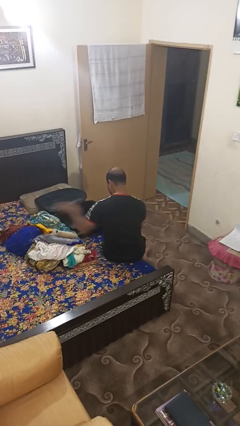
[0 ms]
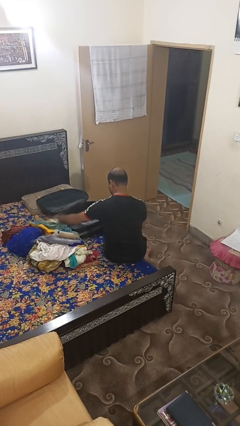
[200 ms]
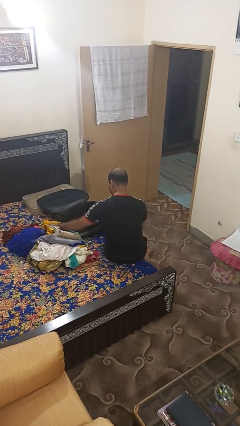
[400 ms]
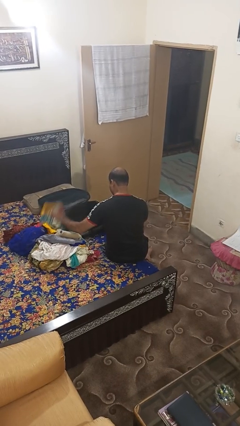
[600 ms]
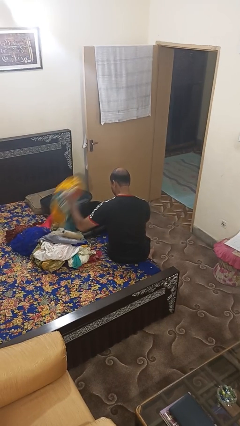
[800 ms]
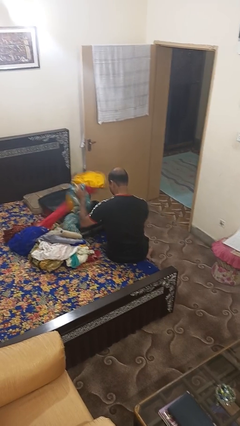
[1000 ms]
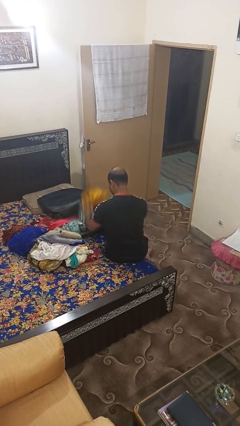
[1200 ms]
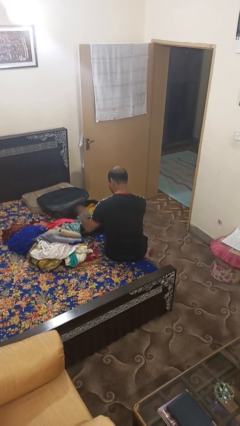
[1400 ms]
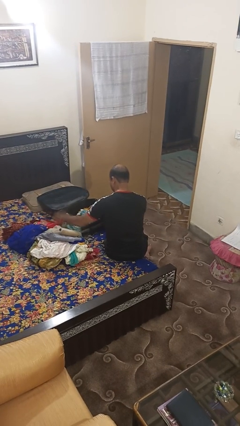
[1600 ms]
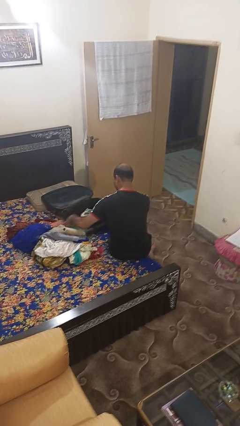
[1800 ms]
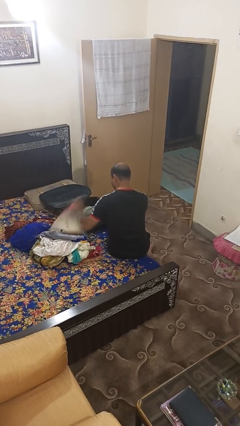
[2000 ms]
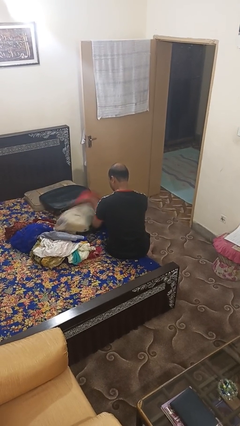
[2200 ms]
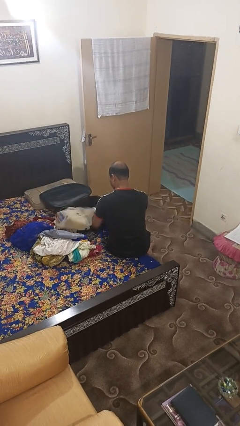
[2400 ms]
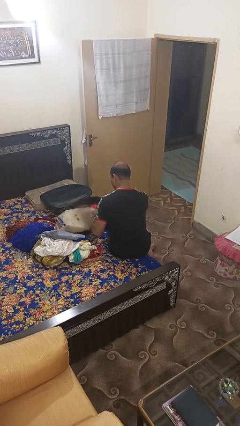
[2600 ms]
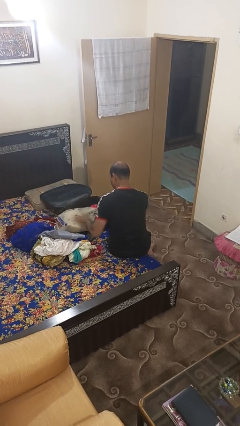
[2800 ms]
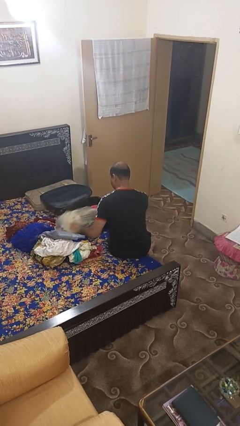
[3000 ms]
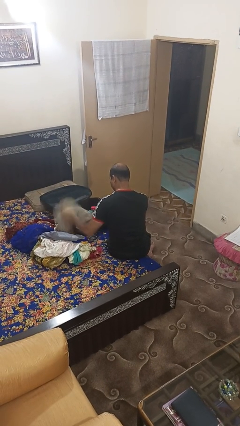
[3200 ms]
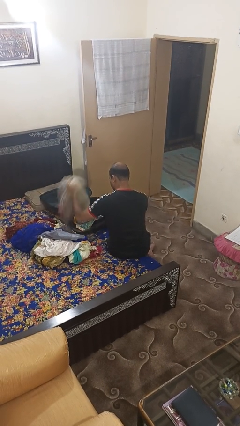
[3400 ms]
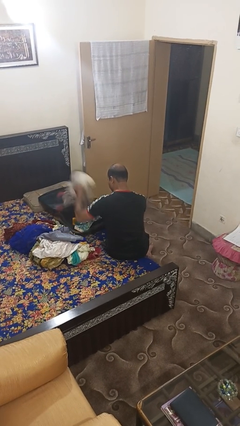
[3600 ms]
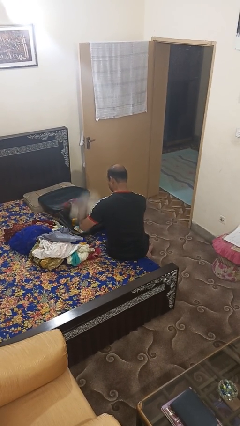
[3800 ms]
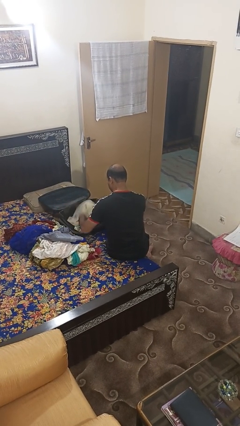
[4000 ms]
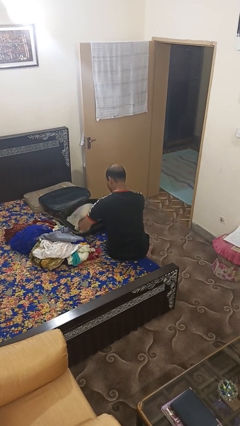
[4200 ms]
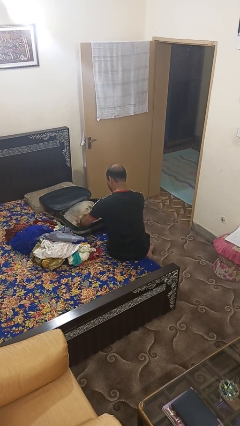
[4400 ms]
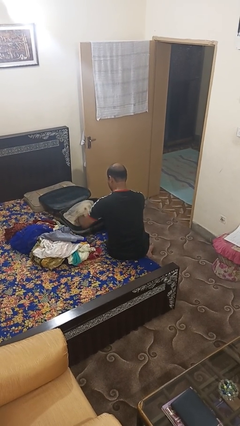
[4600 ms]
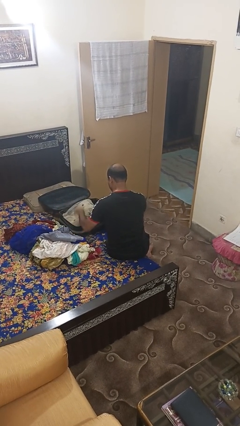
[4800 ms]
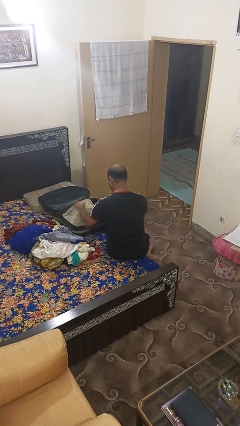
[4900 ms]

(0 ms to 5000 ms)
person loads clothes into suitcase

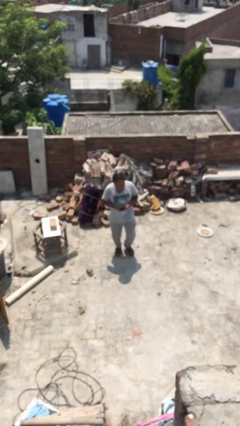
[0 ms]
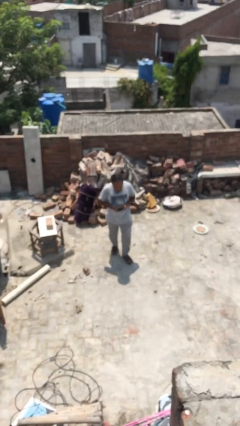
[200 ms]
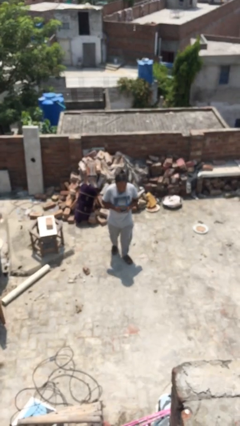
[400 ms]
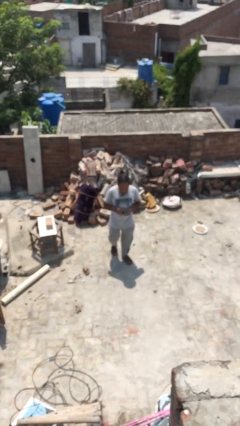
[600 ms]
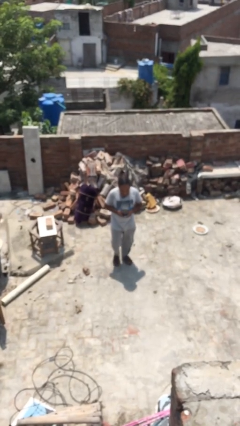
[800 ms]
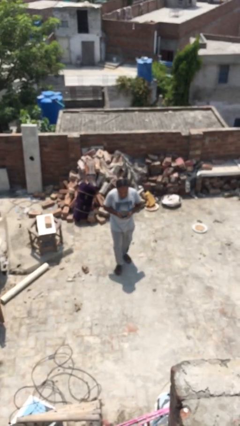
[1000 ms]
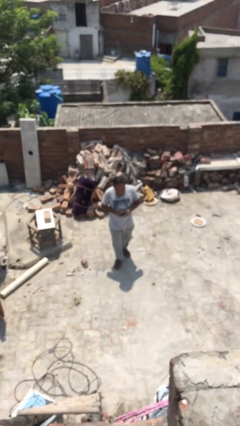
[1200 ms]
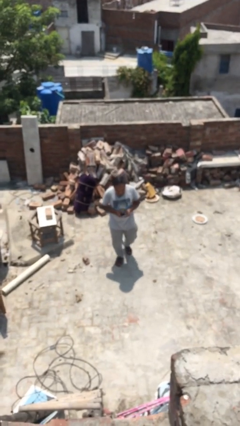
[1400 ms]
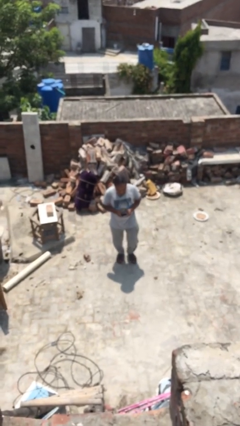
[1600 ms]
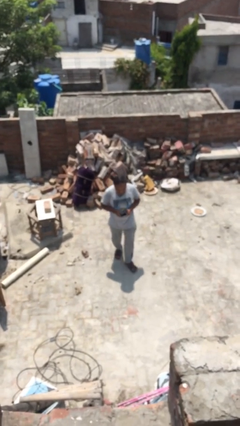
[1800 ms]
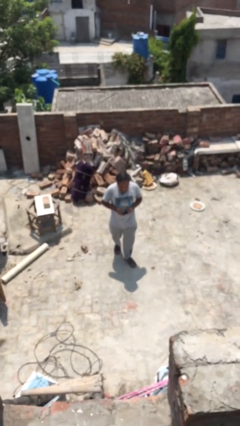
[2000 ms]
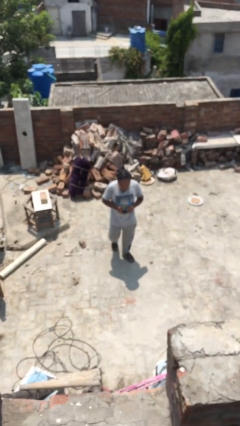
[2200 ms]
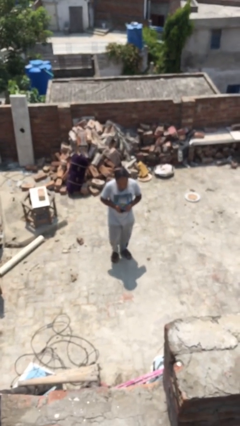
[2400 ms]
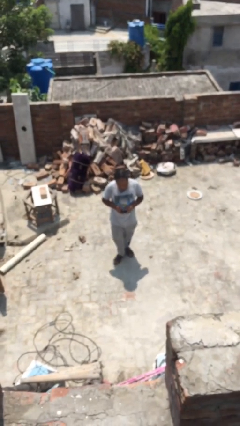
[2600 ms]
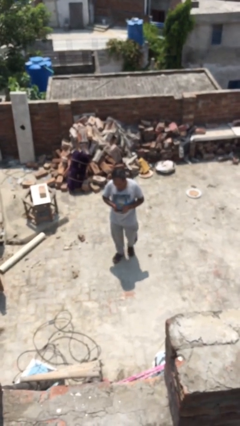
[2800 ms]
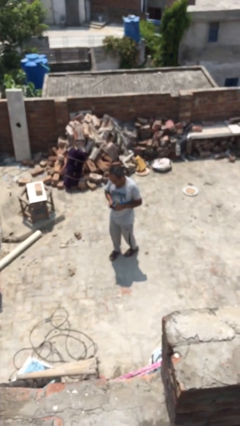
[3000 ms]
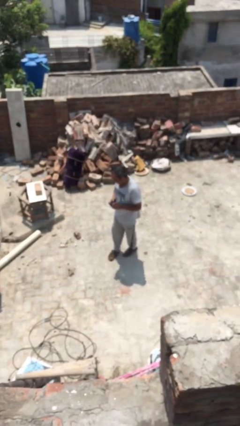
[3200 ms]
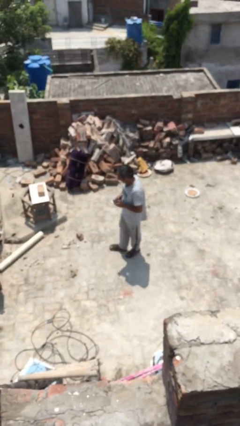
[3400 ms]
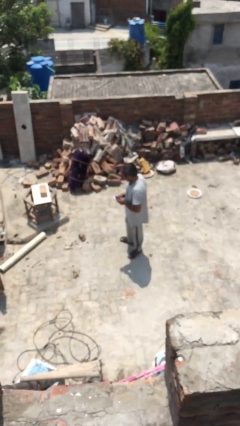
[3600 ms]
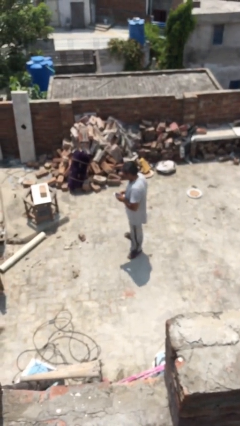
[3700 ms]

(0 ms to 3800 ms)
person texts on phone

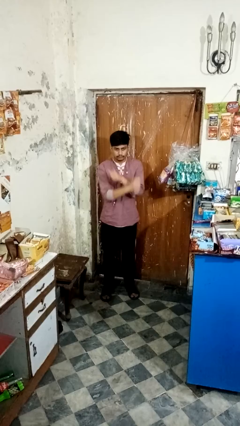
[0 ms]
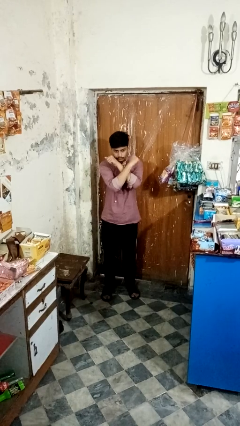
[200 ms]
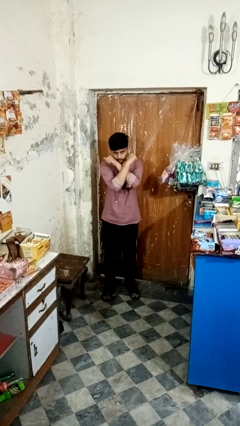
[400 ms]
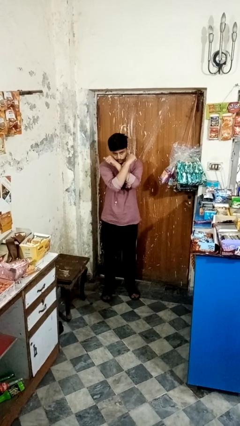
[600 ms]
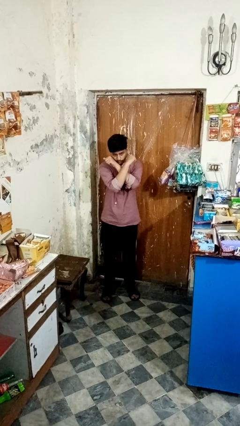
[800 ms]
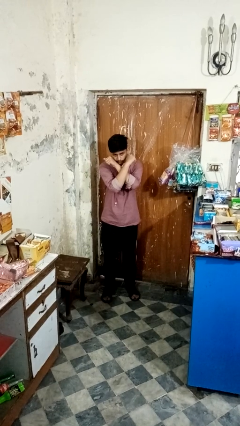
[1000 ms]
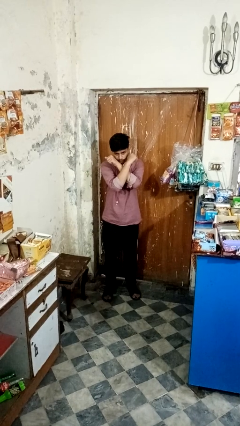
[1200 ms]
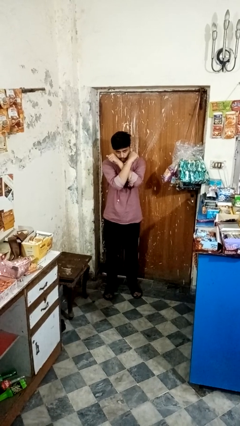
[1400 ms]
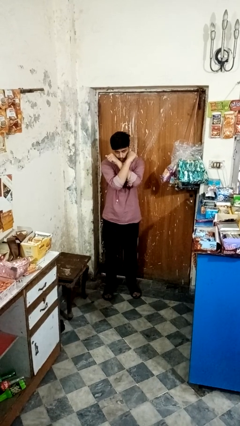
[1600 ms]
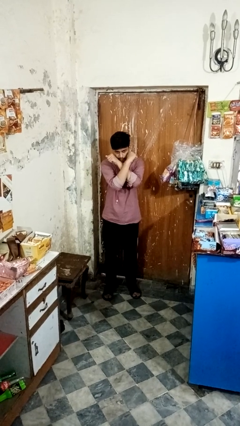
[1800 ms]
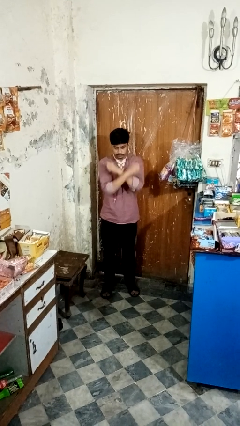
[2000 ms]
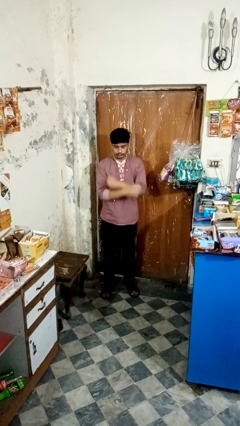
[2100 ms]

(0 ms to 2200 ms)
person gestures arms x

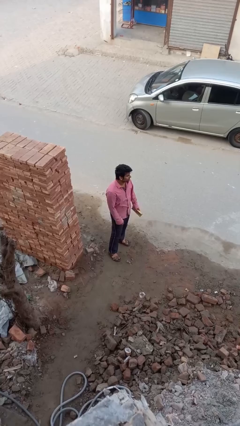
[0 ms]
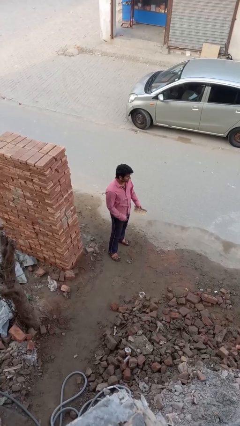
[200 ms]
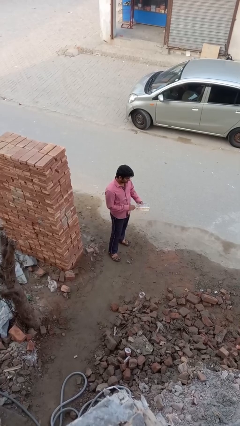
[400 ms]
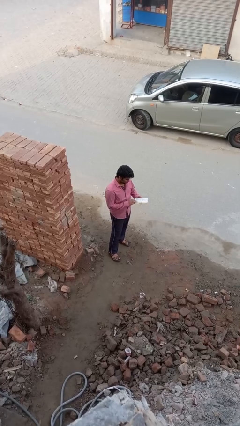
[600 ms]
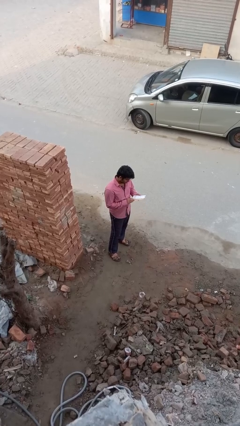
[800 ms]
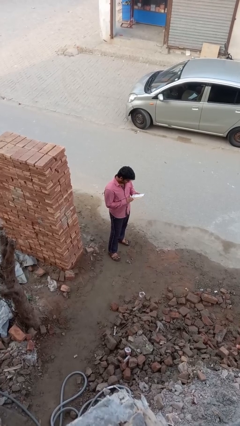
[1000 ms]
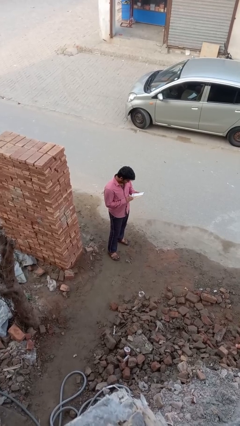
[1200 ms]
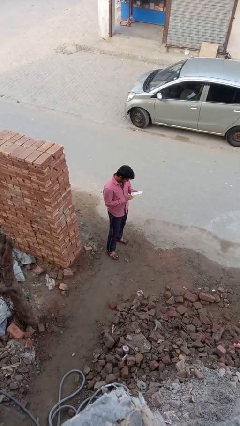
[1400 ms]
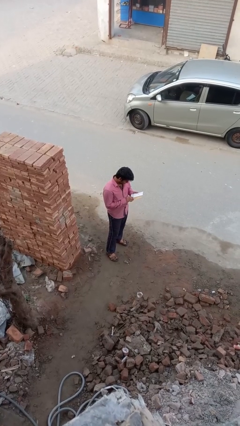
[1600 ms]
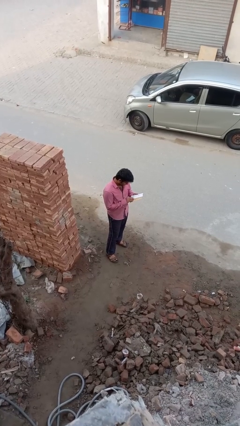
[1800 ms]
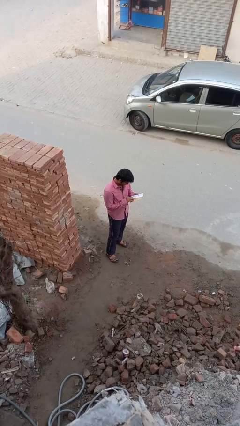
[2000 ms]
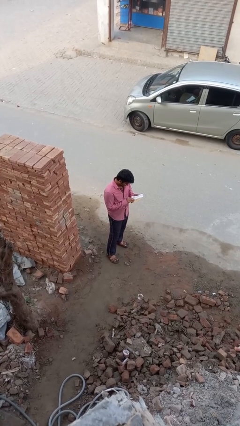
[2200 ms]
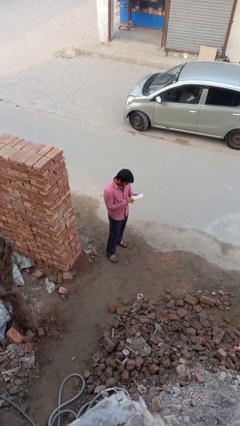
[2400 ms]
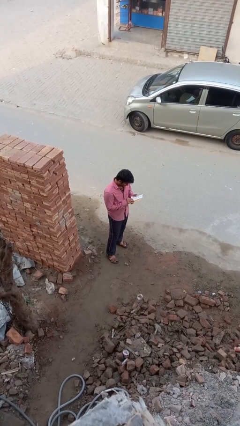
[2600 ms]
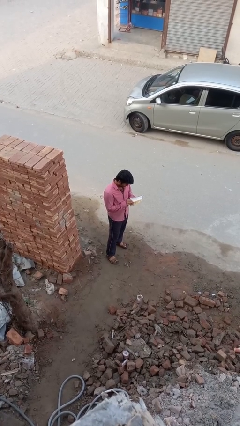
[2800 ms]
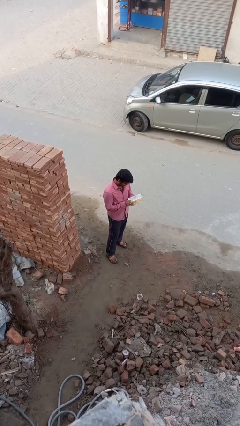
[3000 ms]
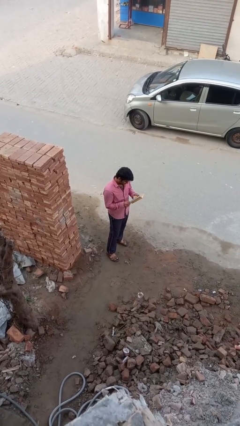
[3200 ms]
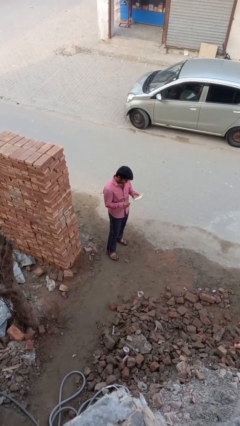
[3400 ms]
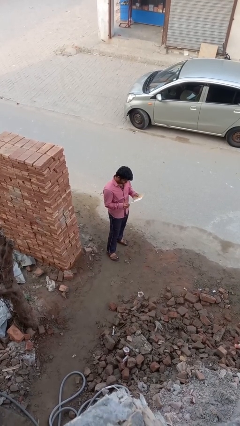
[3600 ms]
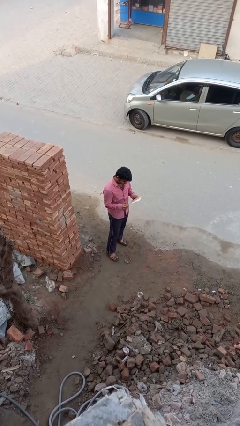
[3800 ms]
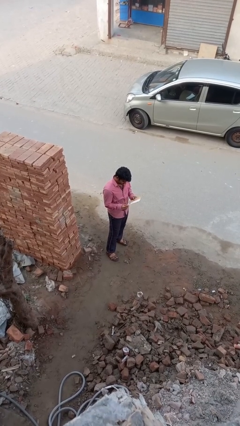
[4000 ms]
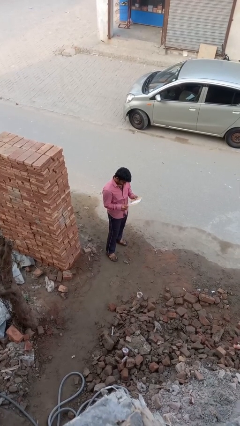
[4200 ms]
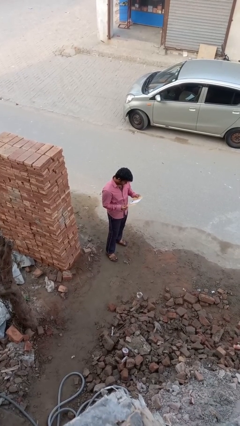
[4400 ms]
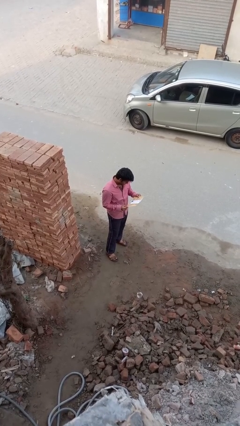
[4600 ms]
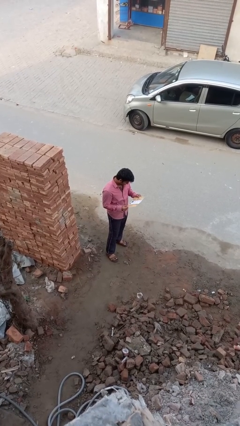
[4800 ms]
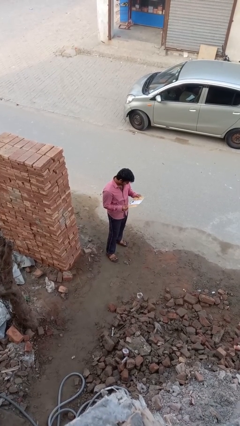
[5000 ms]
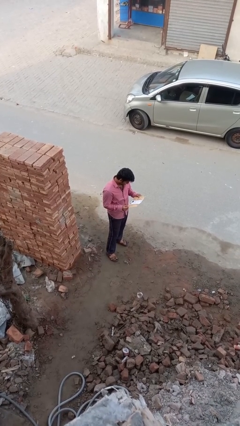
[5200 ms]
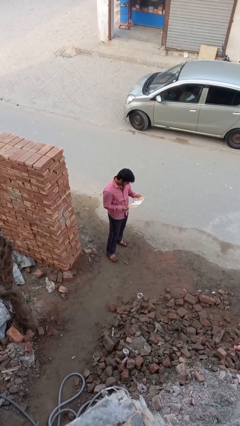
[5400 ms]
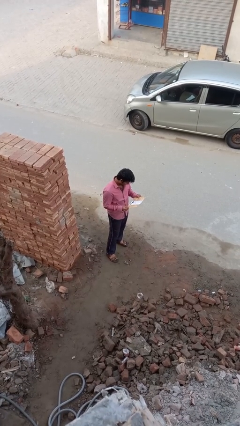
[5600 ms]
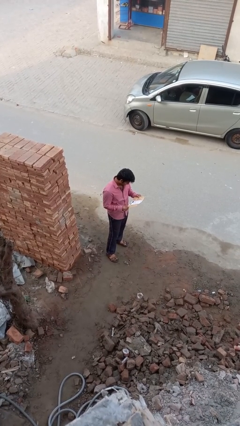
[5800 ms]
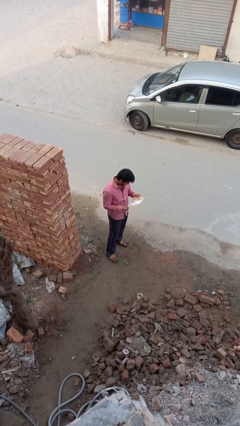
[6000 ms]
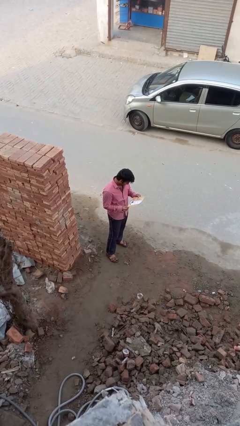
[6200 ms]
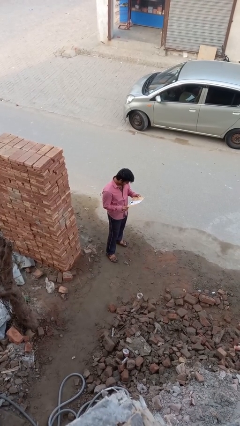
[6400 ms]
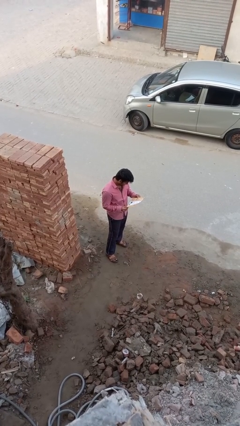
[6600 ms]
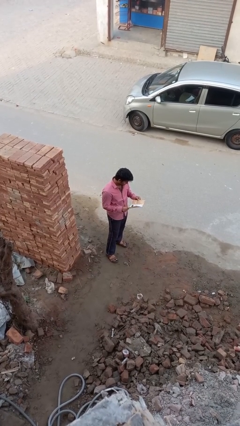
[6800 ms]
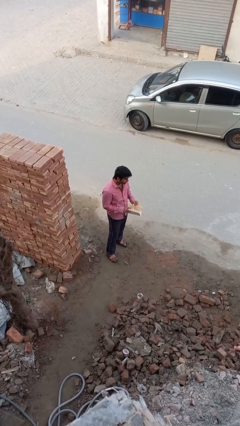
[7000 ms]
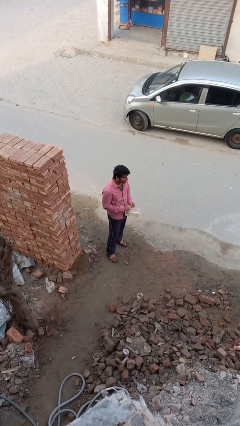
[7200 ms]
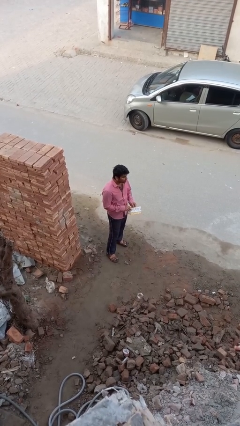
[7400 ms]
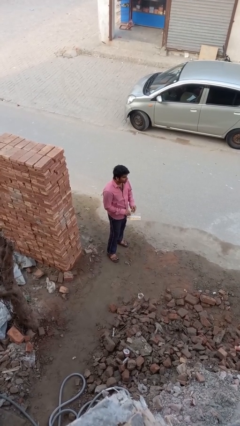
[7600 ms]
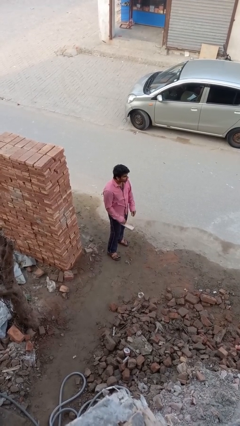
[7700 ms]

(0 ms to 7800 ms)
person reads document
